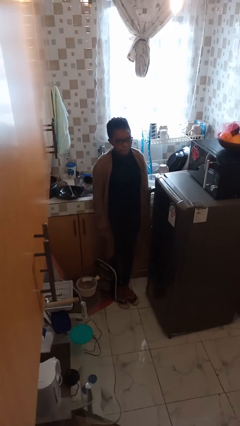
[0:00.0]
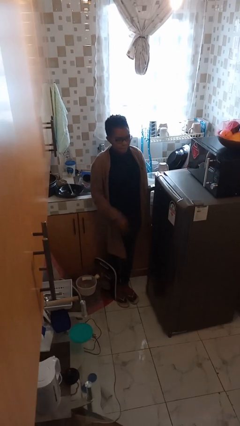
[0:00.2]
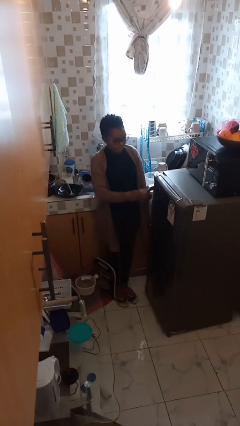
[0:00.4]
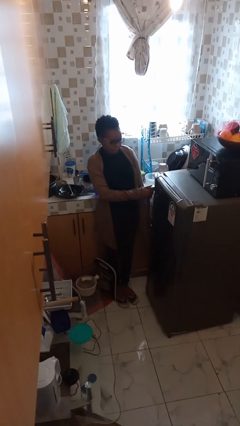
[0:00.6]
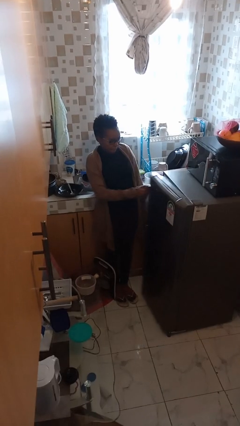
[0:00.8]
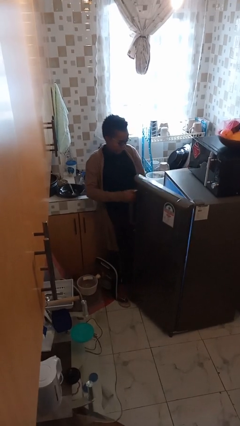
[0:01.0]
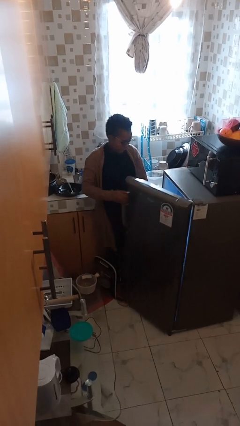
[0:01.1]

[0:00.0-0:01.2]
person takes object from refrigerator

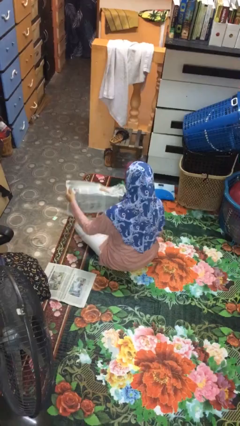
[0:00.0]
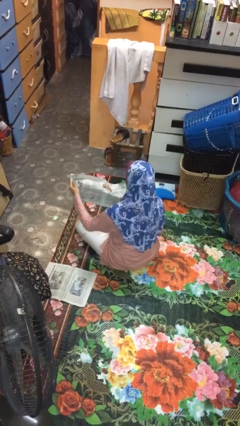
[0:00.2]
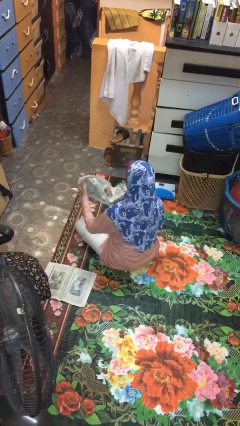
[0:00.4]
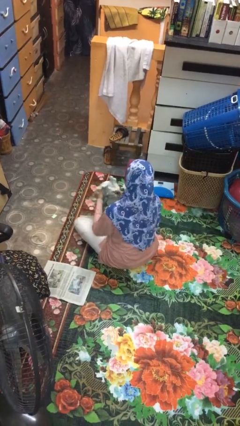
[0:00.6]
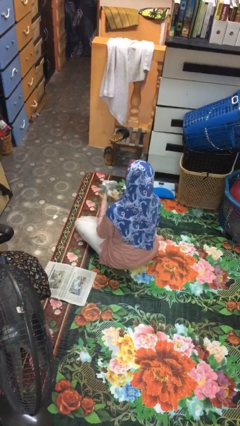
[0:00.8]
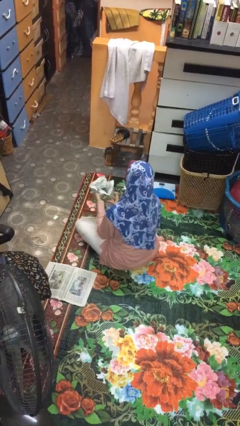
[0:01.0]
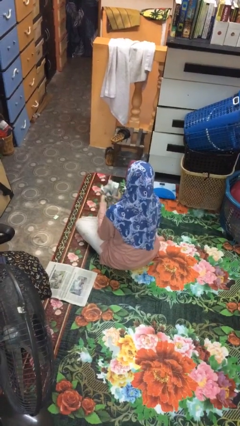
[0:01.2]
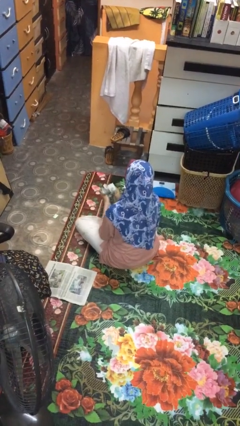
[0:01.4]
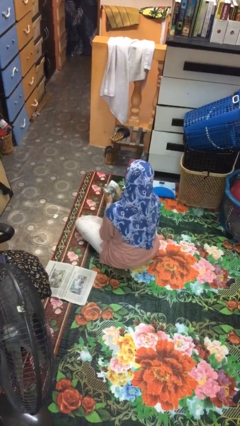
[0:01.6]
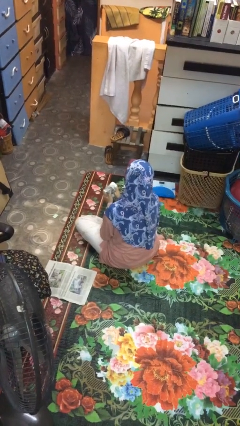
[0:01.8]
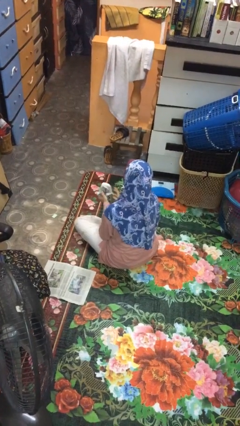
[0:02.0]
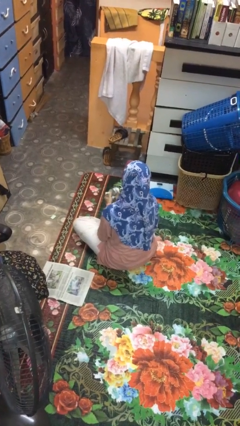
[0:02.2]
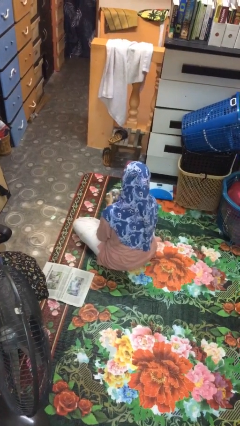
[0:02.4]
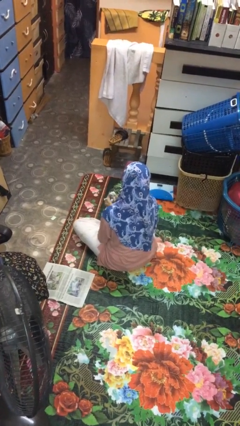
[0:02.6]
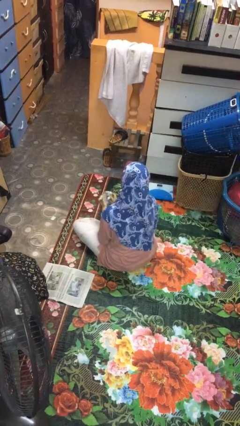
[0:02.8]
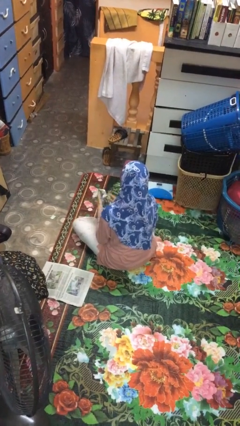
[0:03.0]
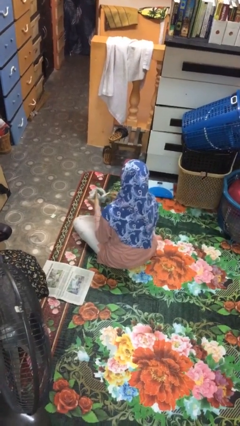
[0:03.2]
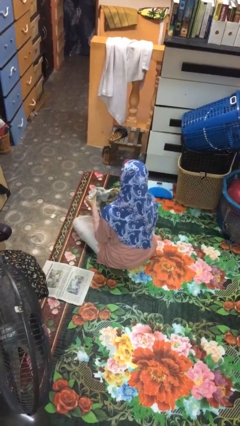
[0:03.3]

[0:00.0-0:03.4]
person crumples paper

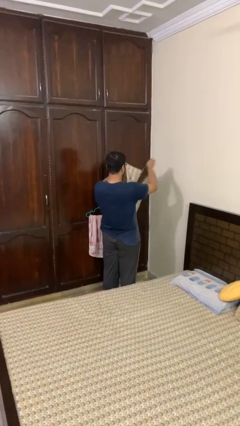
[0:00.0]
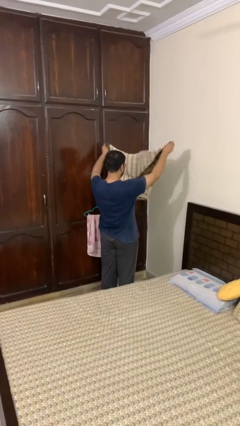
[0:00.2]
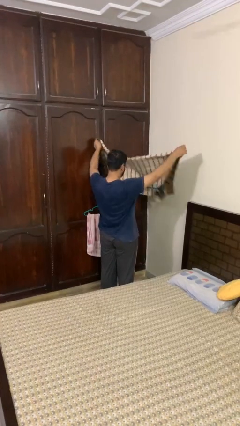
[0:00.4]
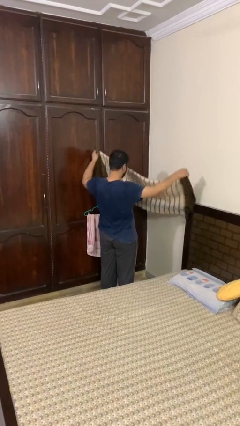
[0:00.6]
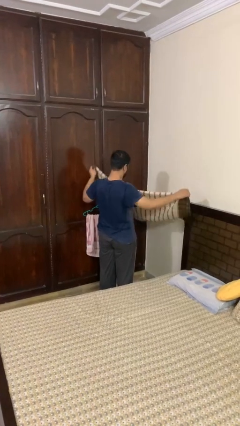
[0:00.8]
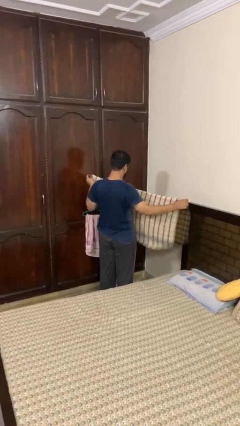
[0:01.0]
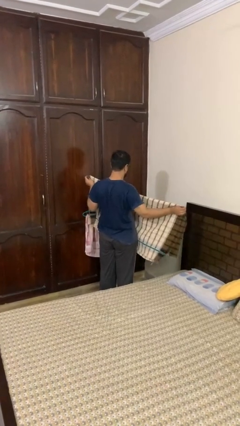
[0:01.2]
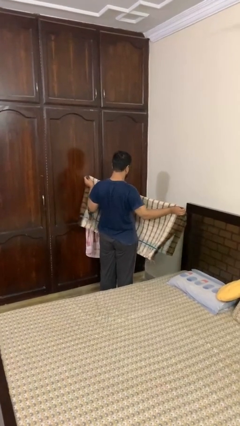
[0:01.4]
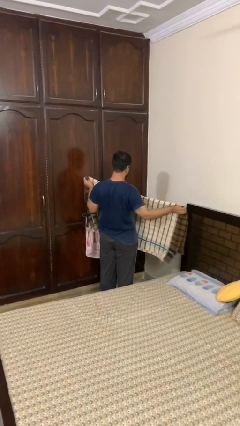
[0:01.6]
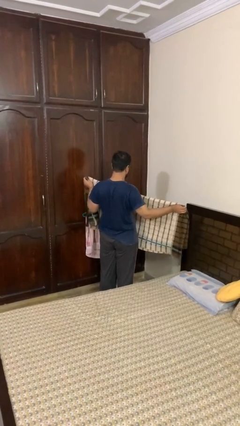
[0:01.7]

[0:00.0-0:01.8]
person unfolds blanket

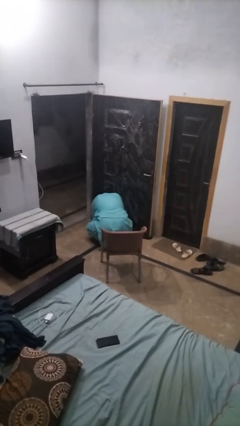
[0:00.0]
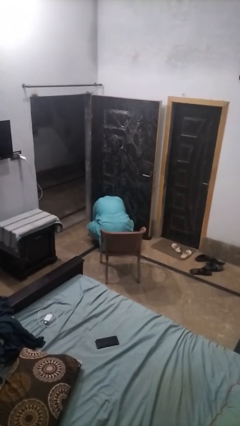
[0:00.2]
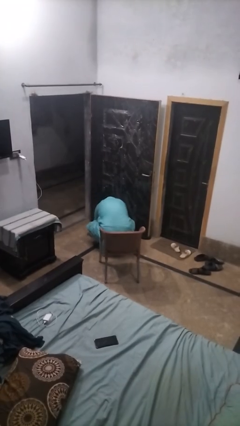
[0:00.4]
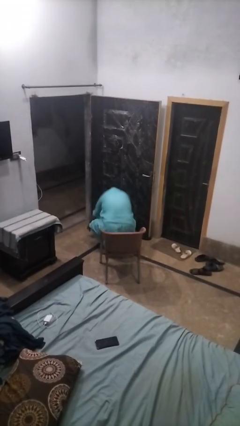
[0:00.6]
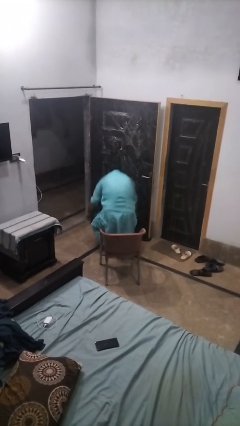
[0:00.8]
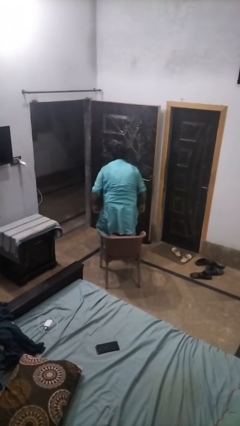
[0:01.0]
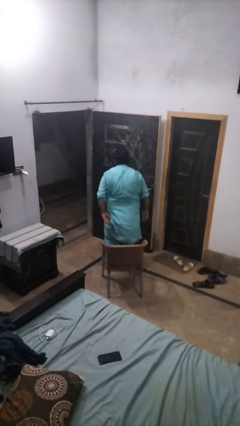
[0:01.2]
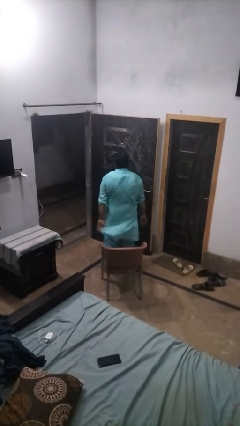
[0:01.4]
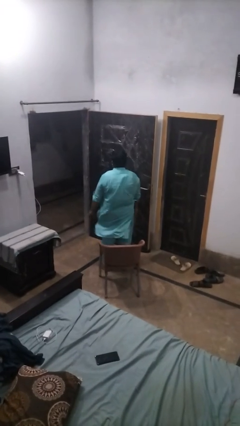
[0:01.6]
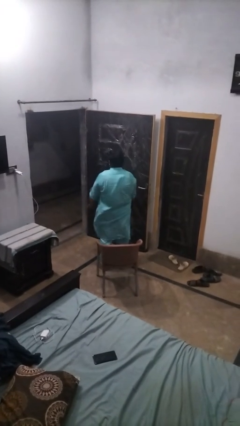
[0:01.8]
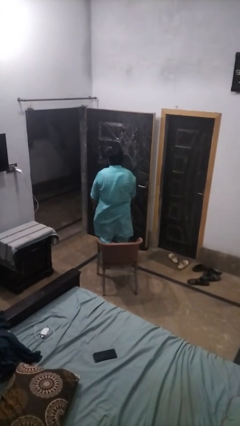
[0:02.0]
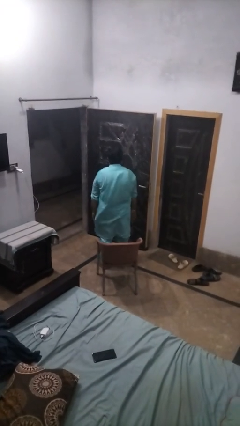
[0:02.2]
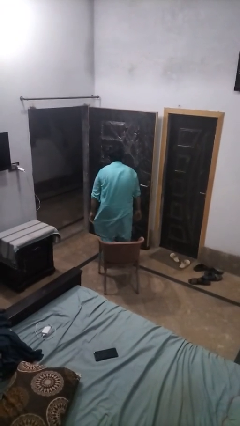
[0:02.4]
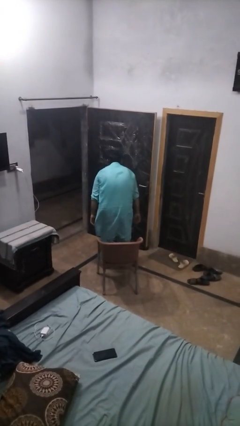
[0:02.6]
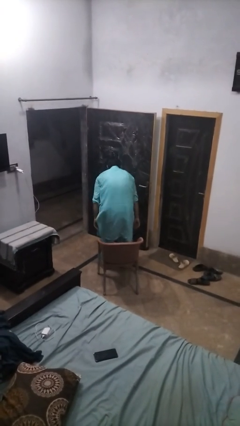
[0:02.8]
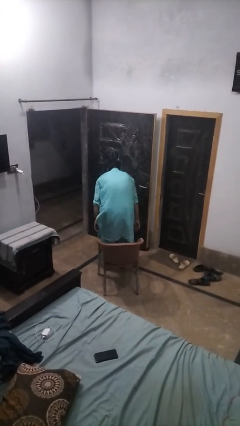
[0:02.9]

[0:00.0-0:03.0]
person stands up from floor

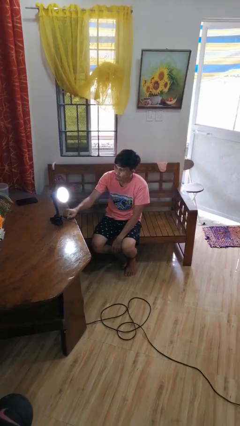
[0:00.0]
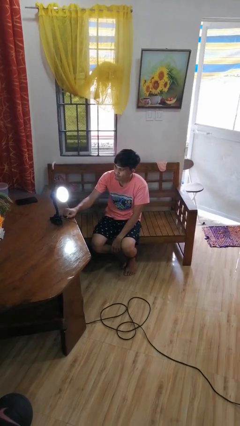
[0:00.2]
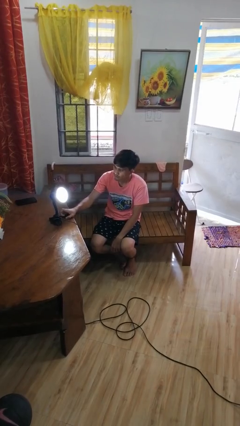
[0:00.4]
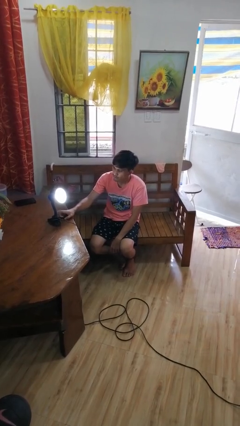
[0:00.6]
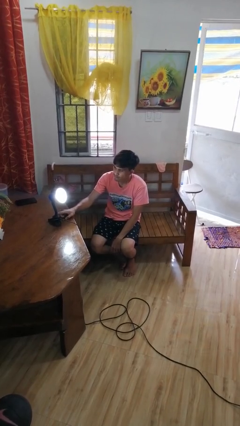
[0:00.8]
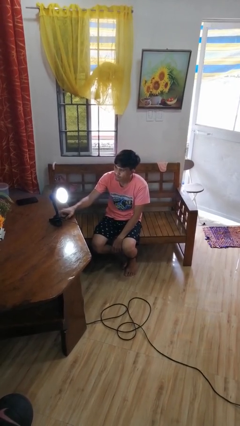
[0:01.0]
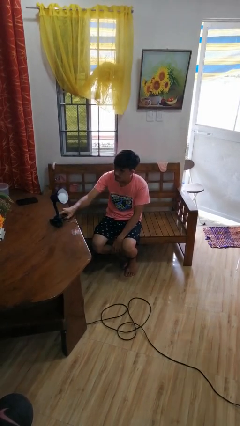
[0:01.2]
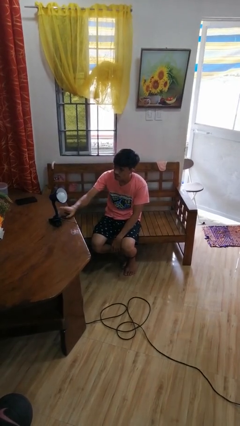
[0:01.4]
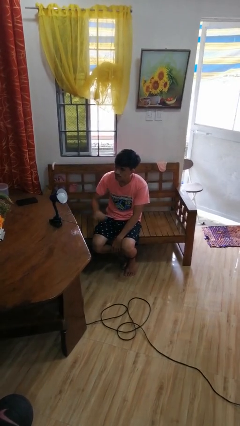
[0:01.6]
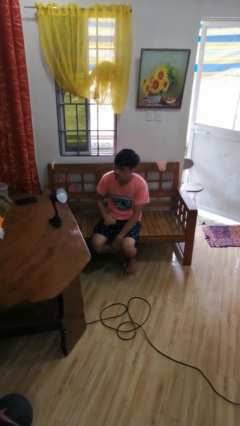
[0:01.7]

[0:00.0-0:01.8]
person turns off lamp

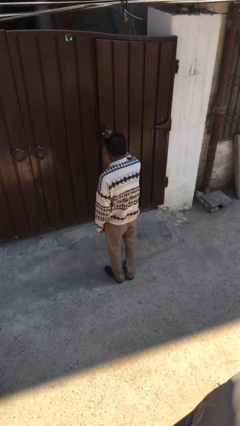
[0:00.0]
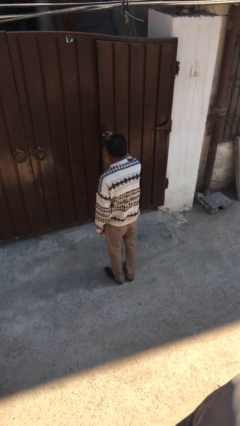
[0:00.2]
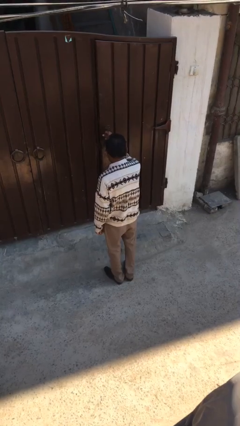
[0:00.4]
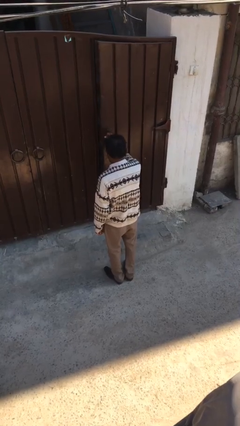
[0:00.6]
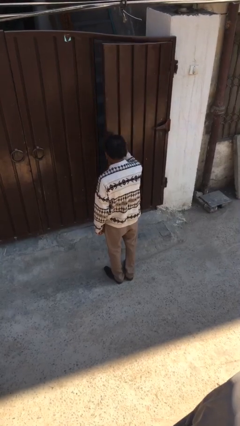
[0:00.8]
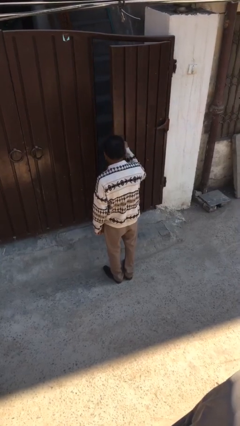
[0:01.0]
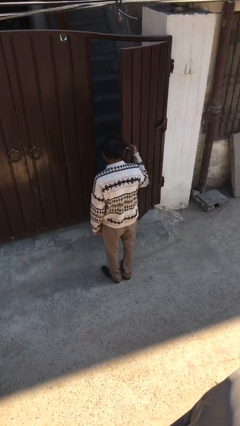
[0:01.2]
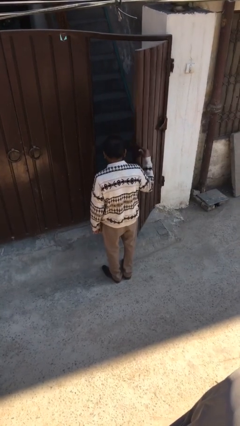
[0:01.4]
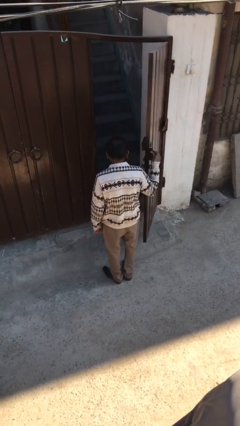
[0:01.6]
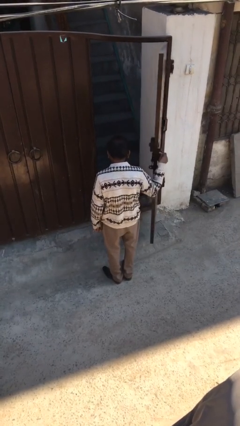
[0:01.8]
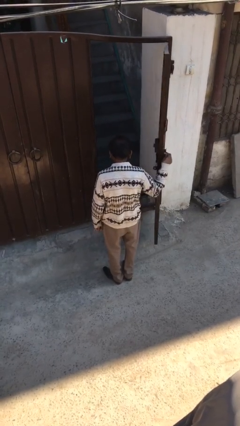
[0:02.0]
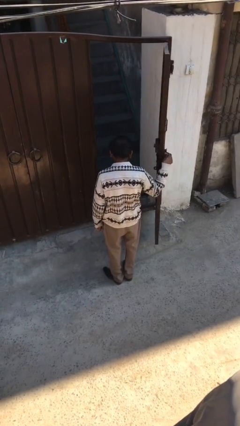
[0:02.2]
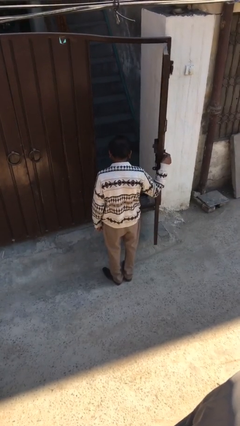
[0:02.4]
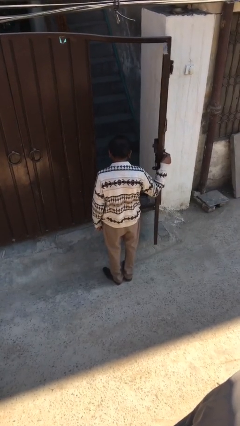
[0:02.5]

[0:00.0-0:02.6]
person opens facility door

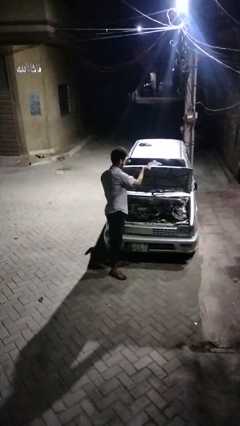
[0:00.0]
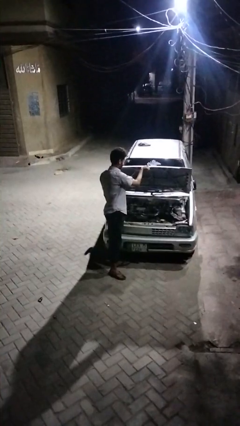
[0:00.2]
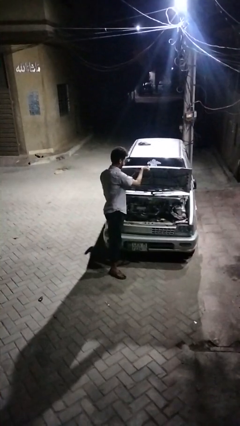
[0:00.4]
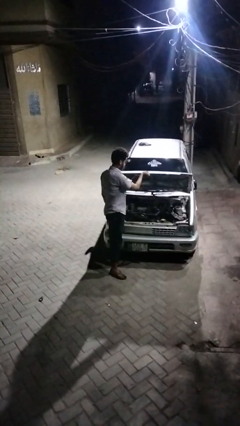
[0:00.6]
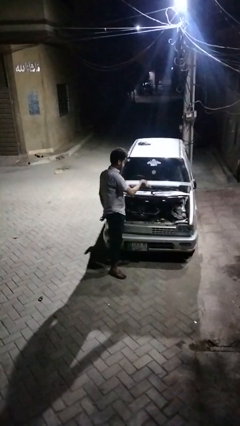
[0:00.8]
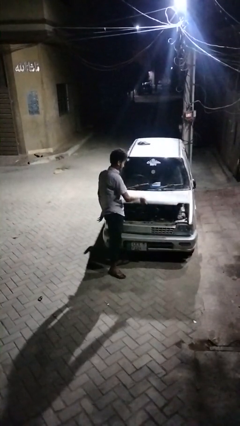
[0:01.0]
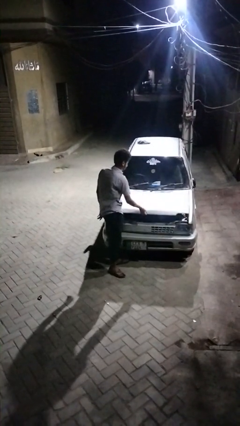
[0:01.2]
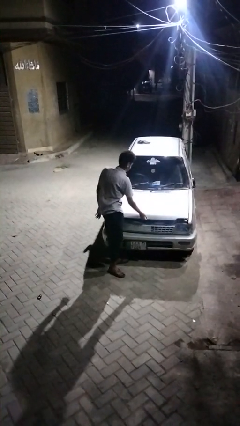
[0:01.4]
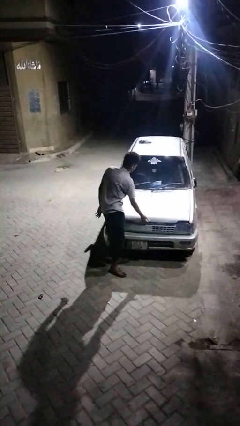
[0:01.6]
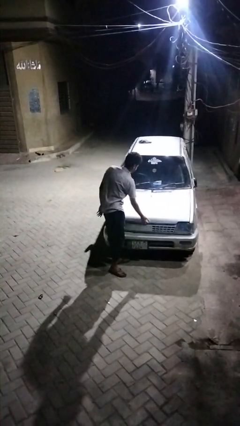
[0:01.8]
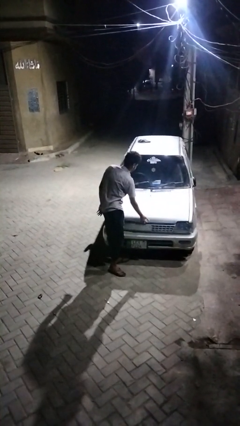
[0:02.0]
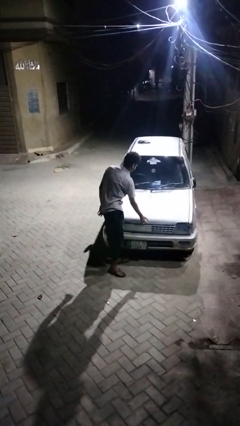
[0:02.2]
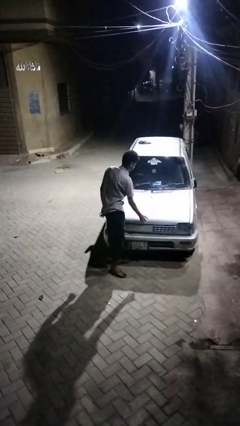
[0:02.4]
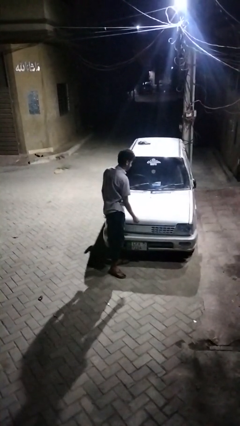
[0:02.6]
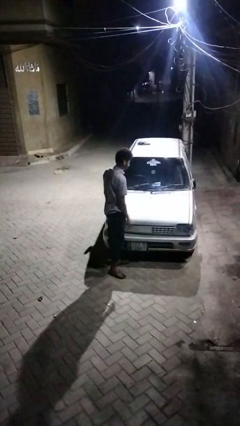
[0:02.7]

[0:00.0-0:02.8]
person closes car hood

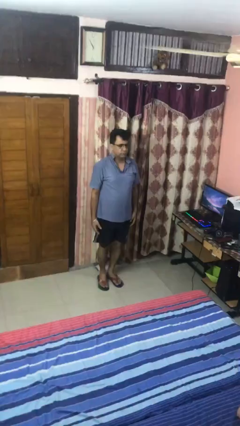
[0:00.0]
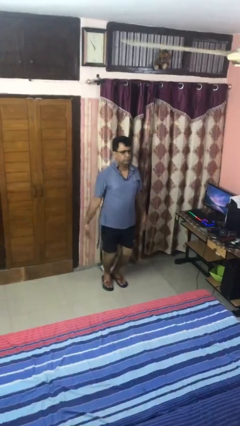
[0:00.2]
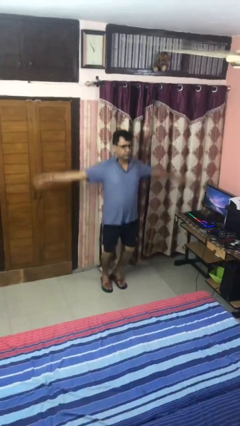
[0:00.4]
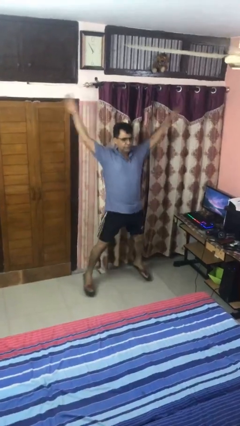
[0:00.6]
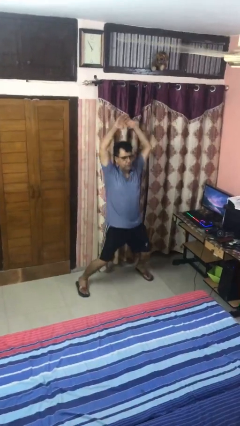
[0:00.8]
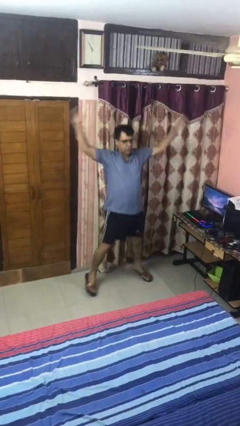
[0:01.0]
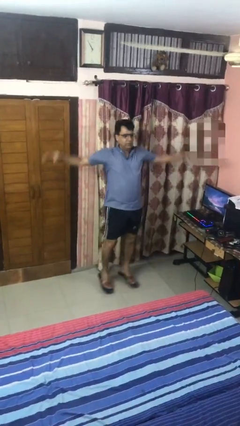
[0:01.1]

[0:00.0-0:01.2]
person exercises with jumping jacks
